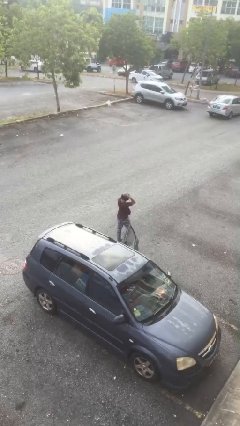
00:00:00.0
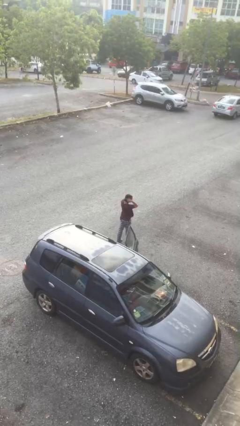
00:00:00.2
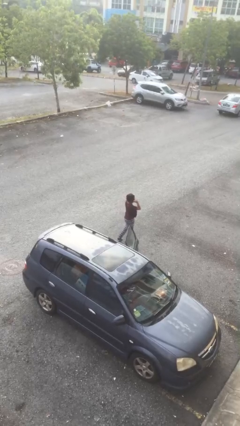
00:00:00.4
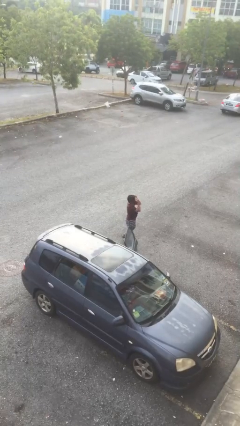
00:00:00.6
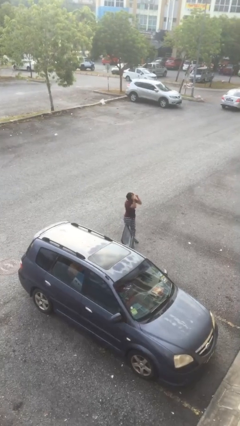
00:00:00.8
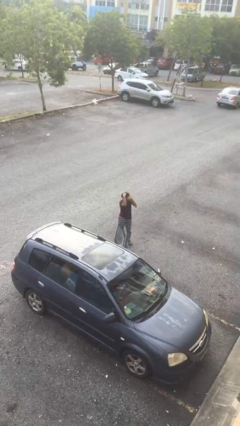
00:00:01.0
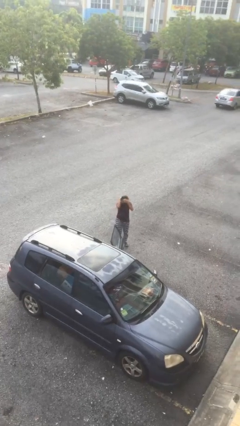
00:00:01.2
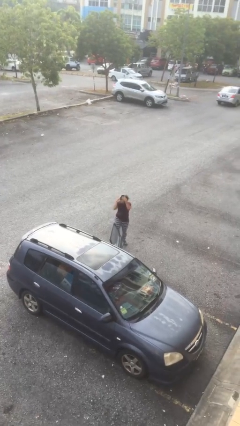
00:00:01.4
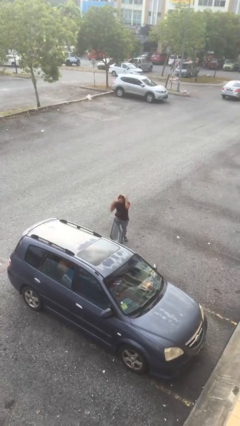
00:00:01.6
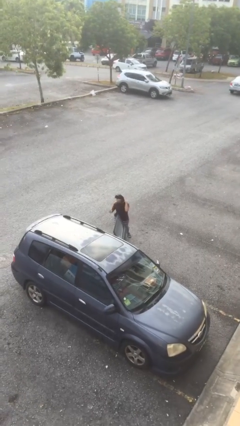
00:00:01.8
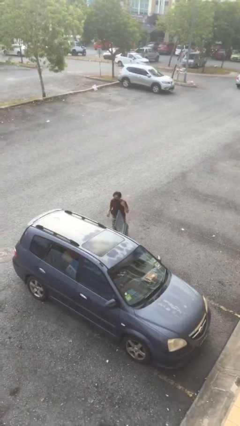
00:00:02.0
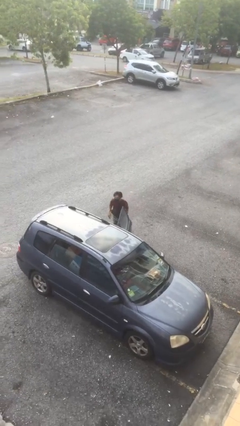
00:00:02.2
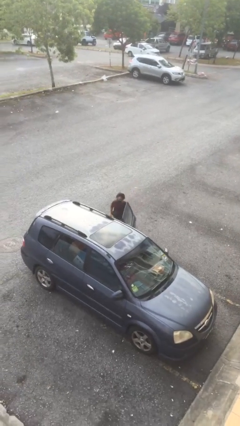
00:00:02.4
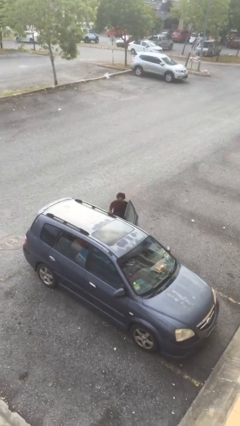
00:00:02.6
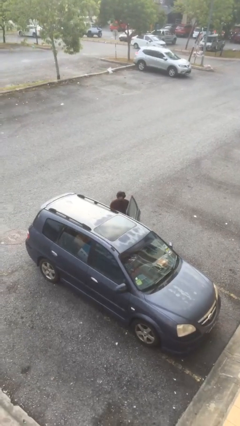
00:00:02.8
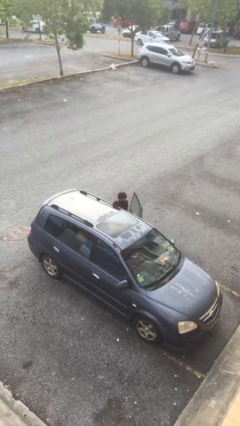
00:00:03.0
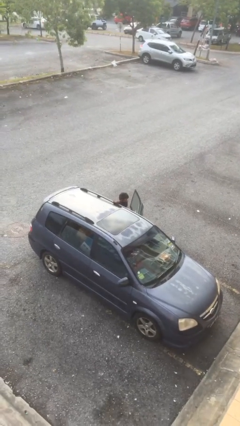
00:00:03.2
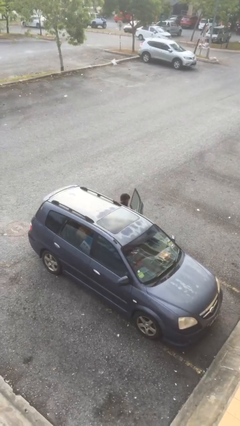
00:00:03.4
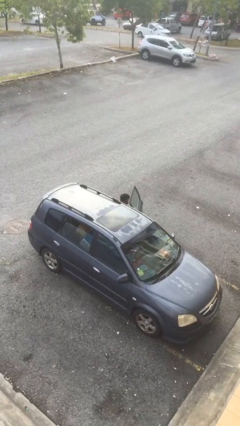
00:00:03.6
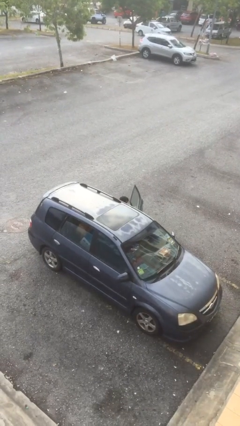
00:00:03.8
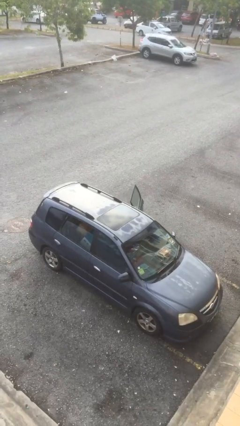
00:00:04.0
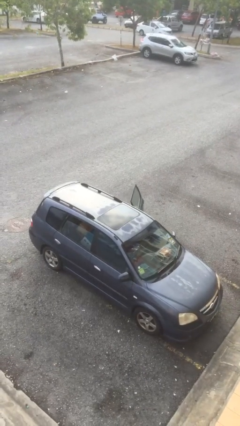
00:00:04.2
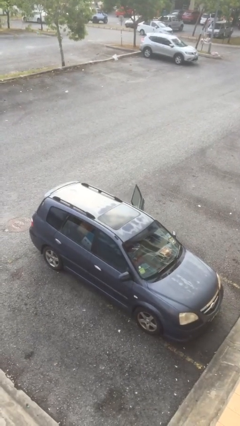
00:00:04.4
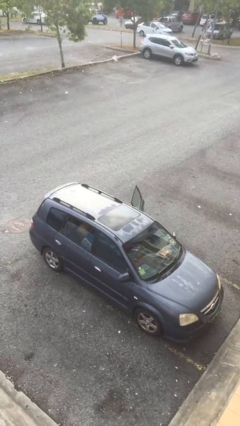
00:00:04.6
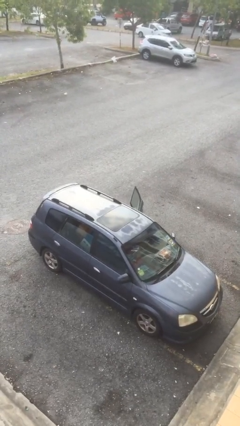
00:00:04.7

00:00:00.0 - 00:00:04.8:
person enters car

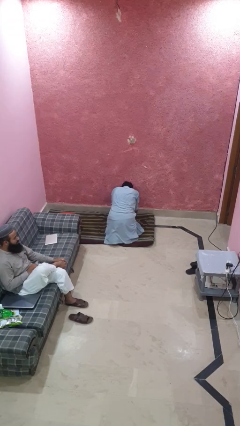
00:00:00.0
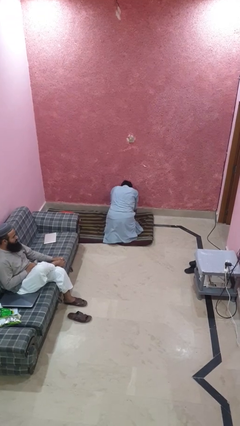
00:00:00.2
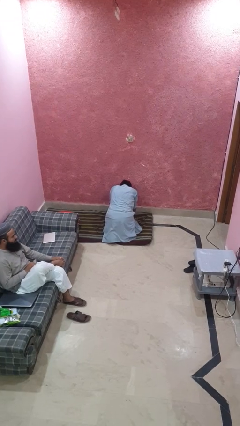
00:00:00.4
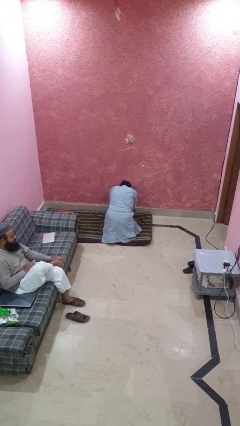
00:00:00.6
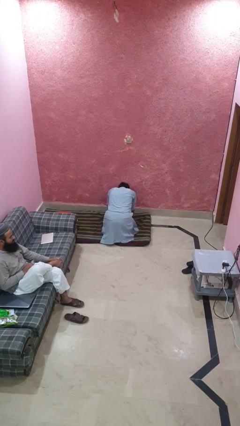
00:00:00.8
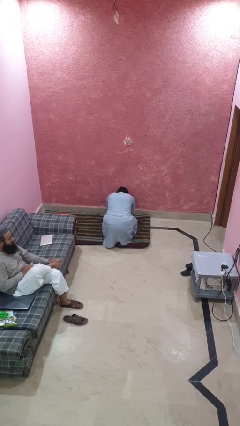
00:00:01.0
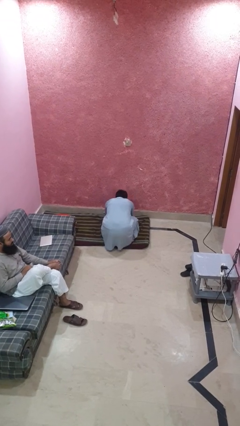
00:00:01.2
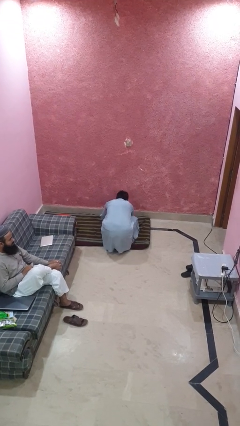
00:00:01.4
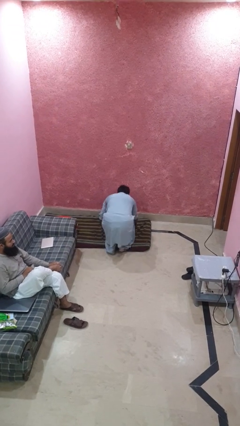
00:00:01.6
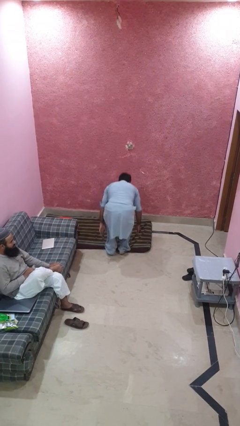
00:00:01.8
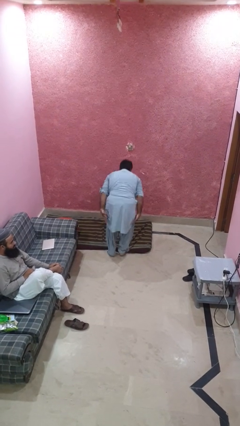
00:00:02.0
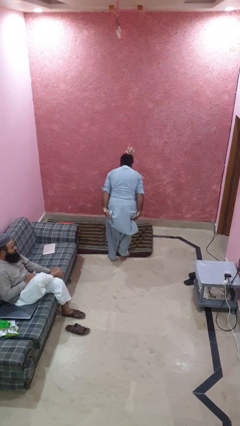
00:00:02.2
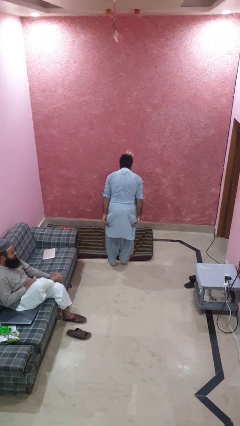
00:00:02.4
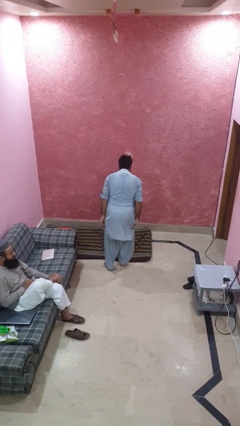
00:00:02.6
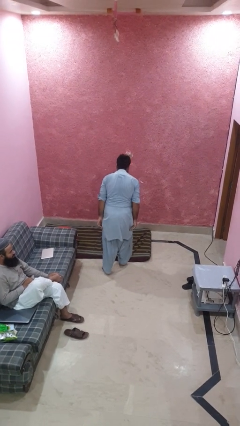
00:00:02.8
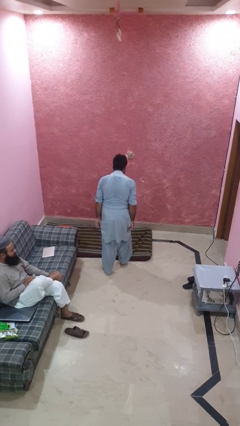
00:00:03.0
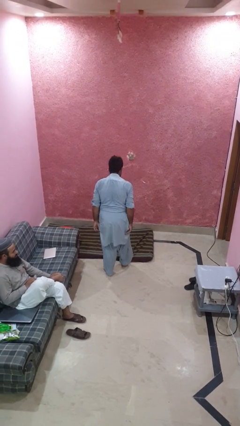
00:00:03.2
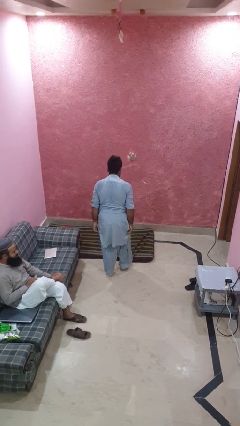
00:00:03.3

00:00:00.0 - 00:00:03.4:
person stands up from floor

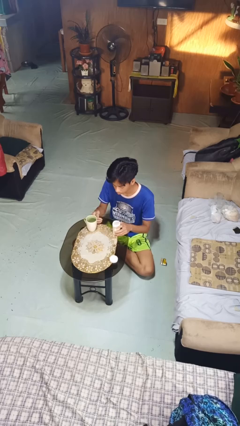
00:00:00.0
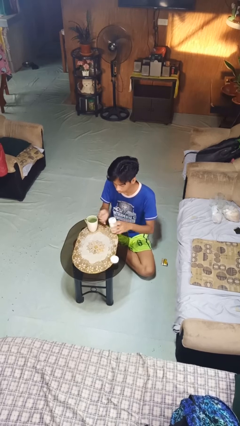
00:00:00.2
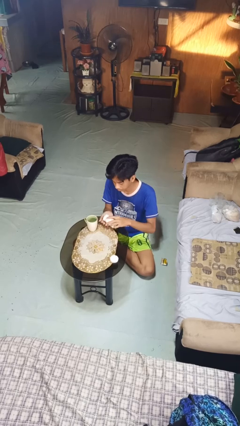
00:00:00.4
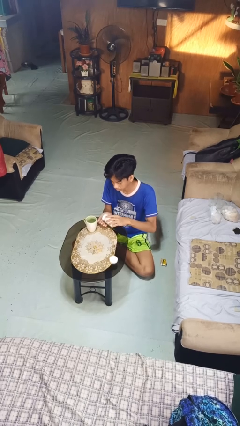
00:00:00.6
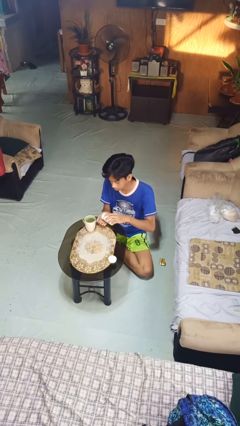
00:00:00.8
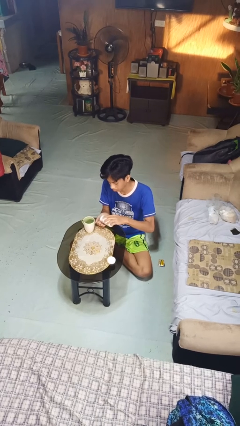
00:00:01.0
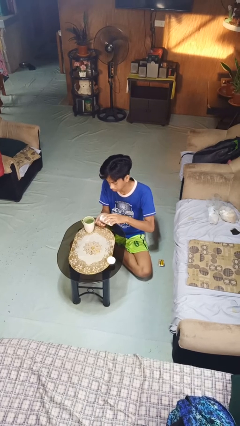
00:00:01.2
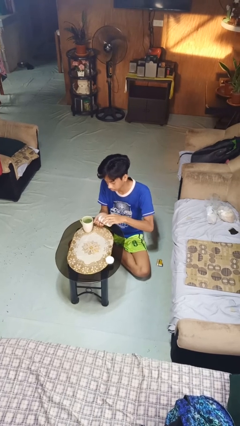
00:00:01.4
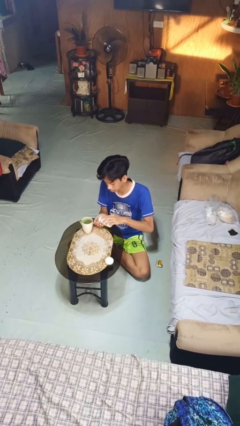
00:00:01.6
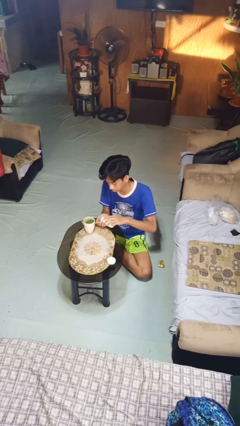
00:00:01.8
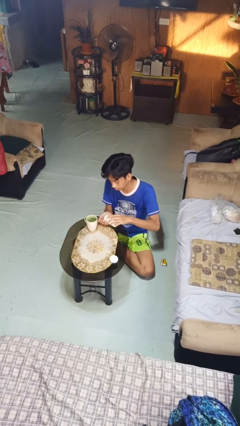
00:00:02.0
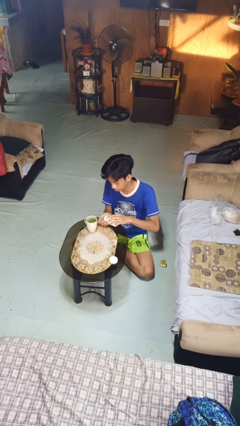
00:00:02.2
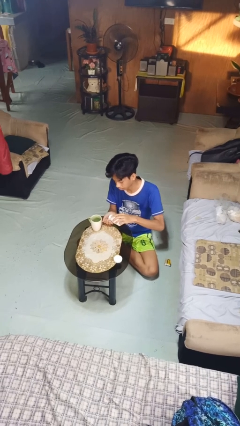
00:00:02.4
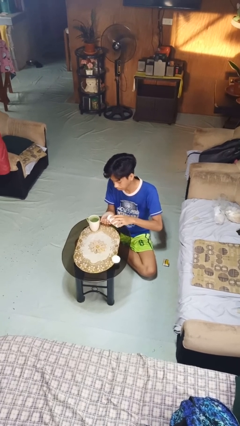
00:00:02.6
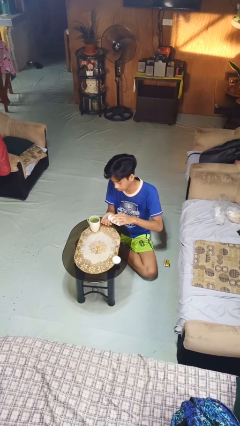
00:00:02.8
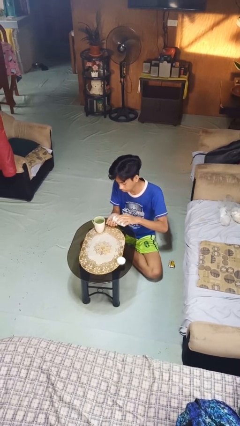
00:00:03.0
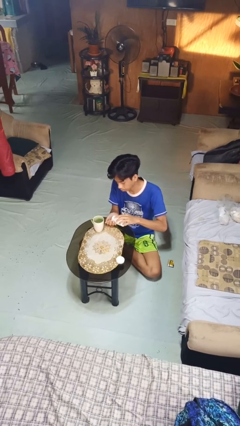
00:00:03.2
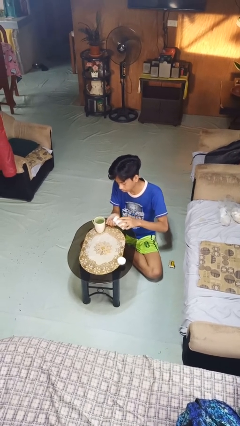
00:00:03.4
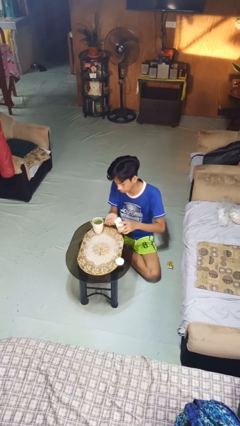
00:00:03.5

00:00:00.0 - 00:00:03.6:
person takes medicine pills

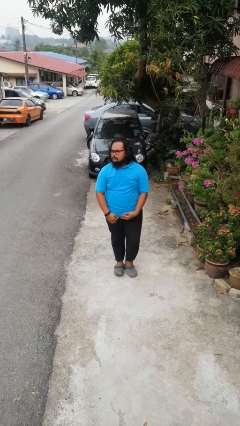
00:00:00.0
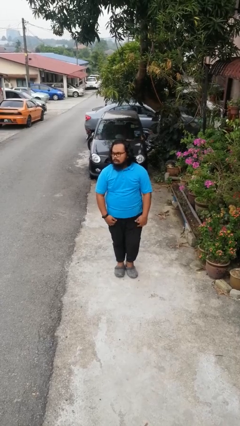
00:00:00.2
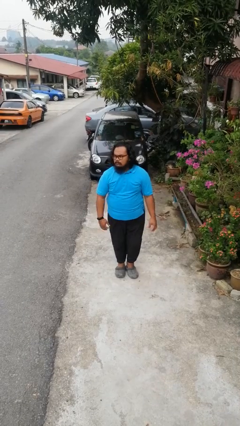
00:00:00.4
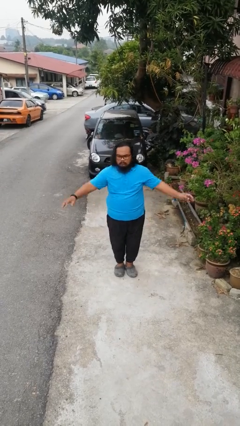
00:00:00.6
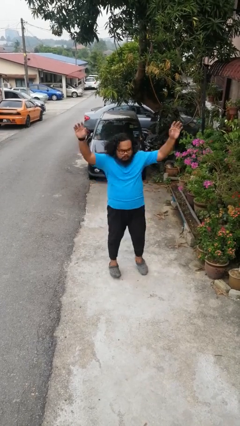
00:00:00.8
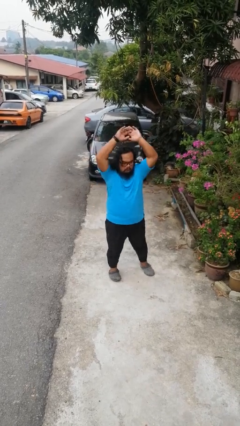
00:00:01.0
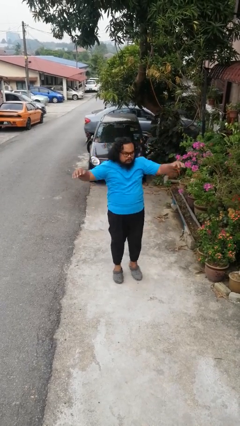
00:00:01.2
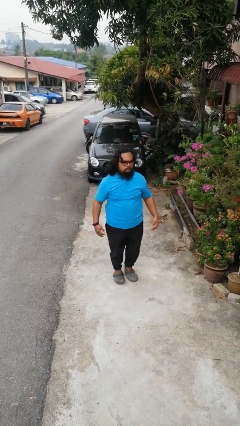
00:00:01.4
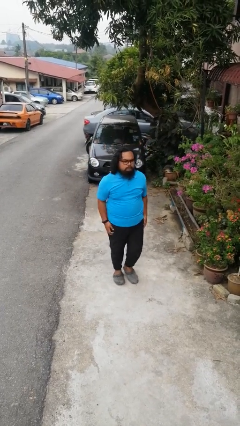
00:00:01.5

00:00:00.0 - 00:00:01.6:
person exercises with jumping jacks

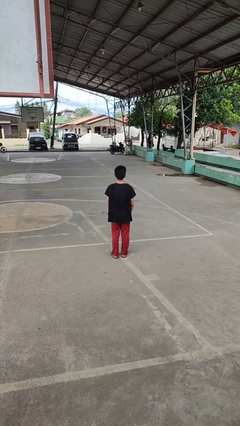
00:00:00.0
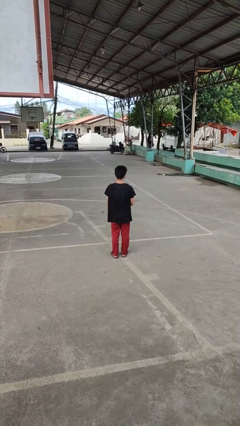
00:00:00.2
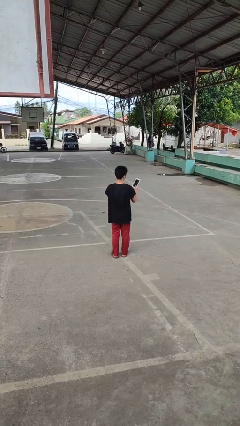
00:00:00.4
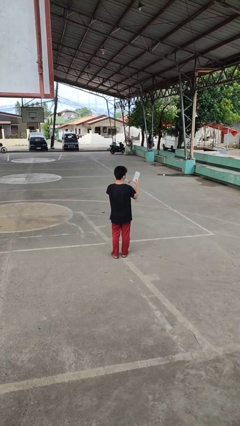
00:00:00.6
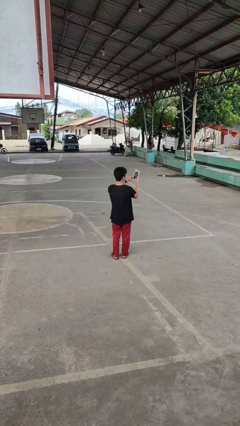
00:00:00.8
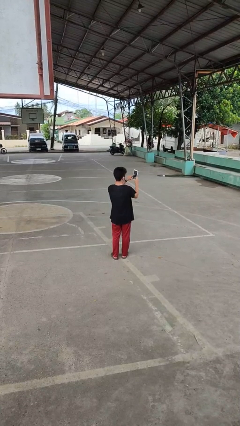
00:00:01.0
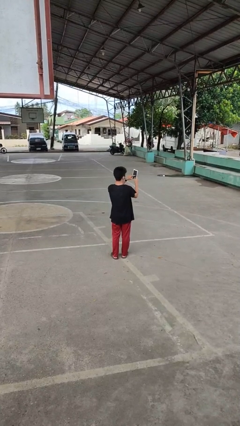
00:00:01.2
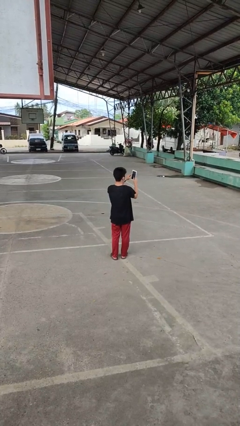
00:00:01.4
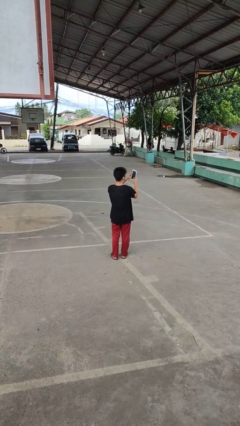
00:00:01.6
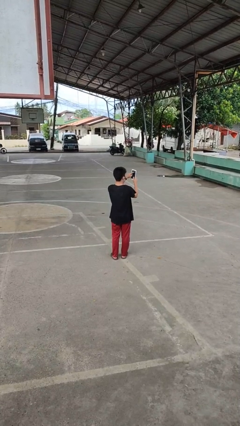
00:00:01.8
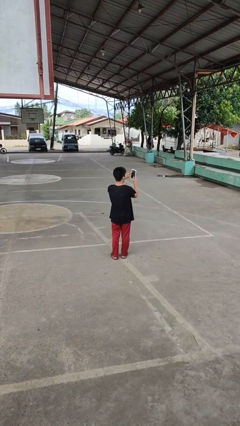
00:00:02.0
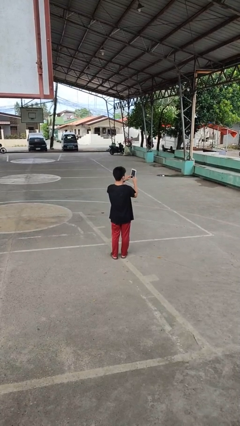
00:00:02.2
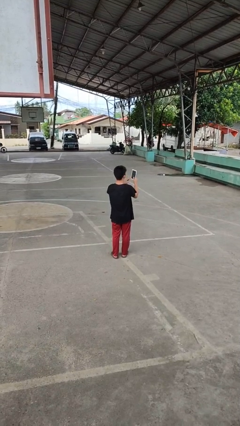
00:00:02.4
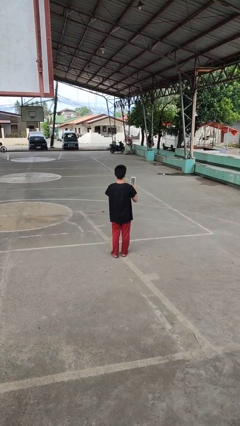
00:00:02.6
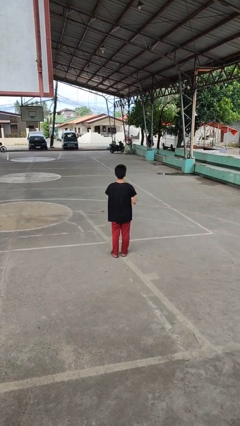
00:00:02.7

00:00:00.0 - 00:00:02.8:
person interacts with tablet

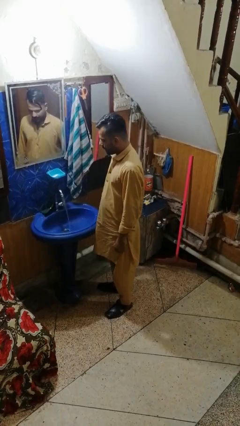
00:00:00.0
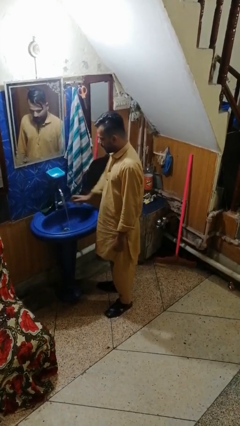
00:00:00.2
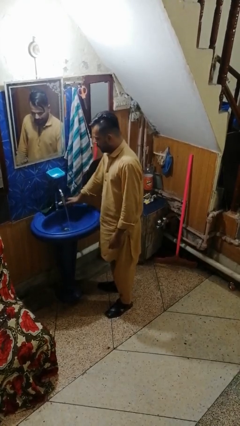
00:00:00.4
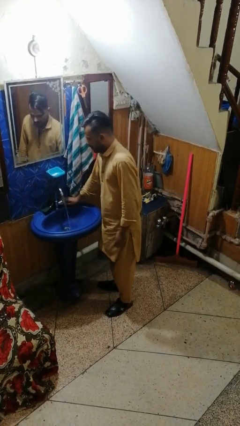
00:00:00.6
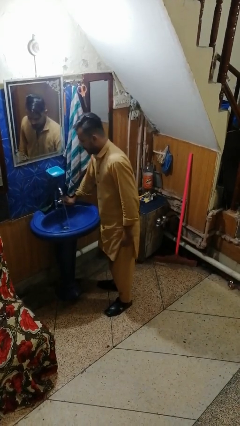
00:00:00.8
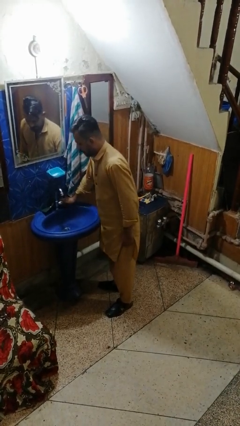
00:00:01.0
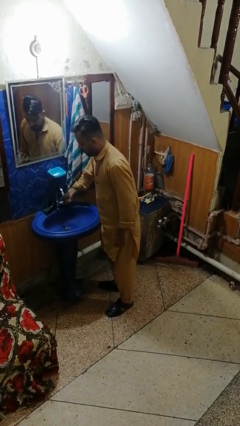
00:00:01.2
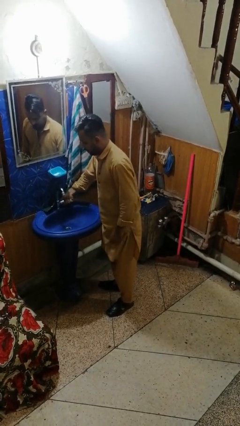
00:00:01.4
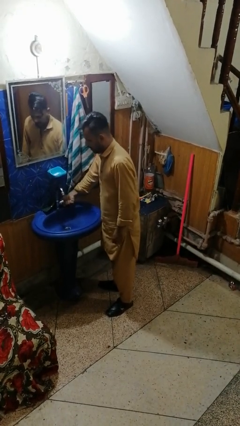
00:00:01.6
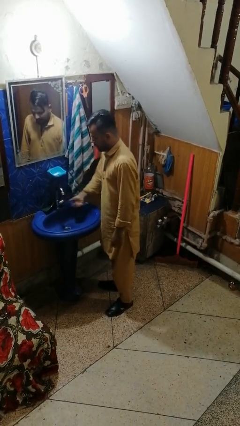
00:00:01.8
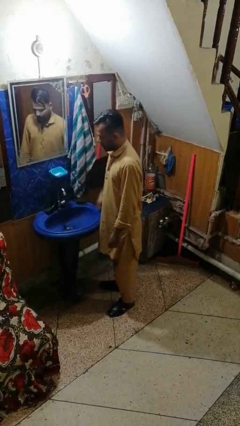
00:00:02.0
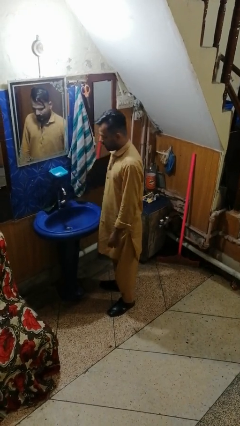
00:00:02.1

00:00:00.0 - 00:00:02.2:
person turns off faucet
